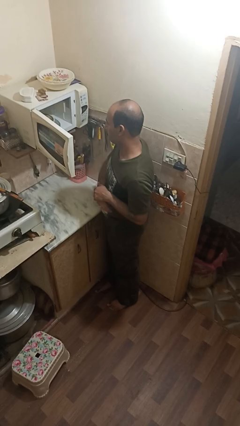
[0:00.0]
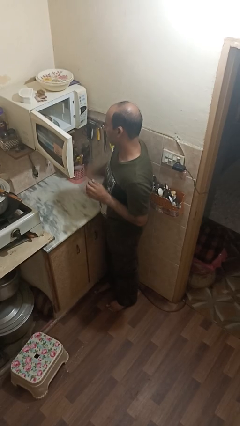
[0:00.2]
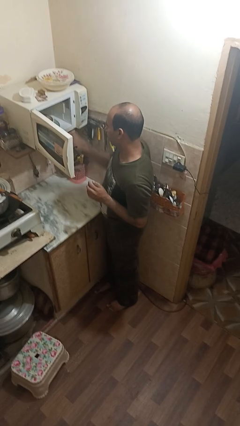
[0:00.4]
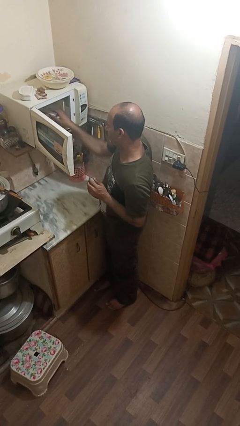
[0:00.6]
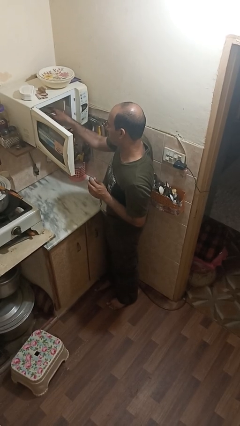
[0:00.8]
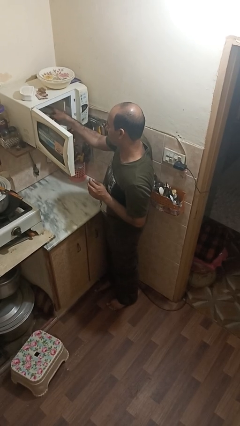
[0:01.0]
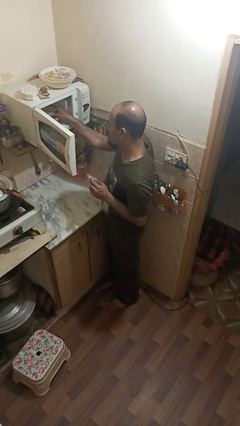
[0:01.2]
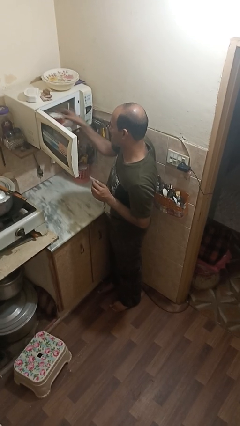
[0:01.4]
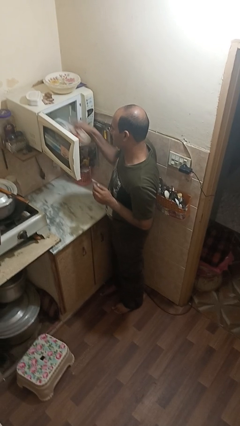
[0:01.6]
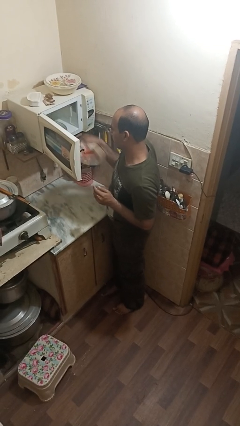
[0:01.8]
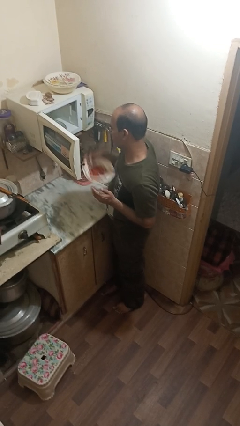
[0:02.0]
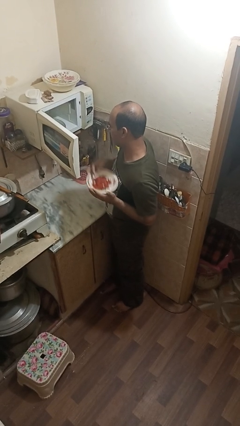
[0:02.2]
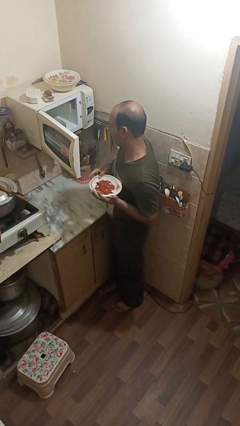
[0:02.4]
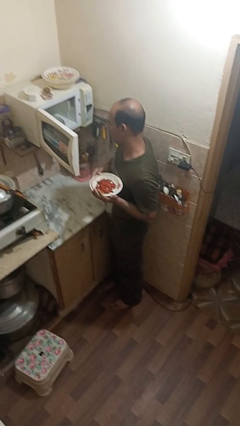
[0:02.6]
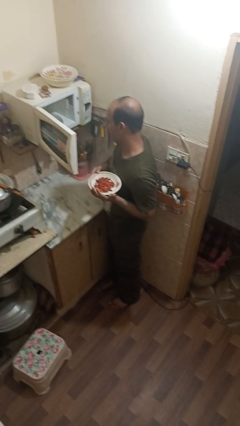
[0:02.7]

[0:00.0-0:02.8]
person takes object from microwave

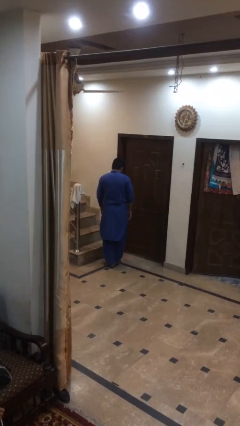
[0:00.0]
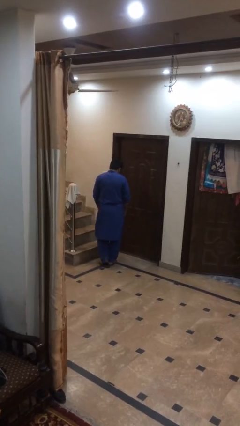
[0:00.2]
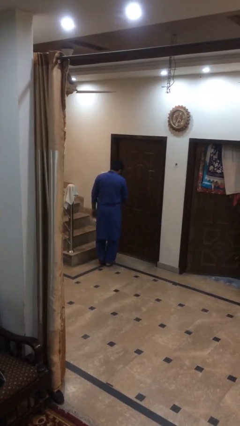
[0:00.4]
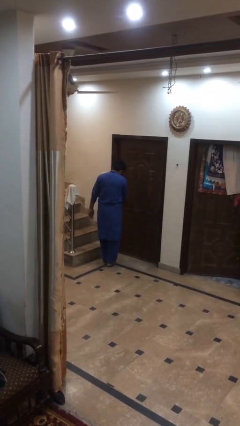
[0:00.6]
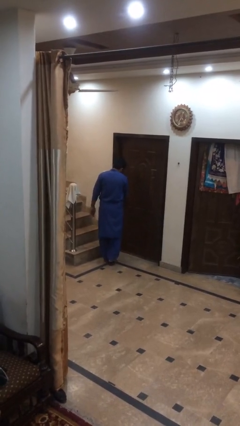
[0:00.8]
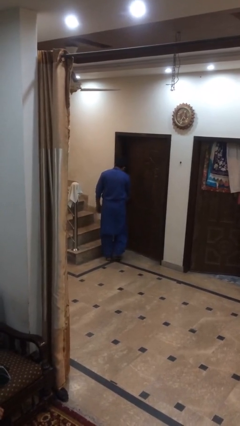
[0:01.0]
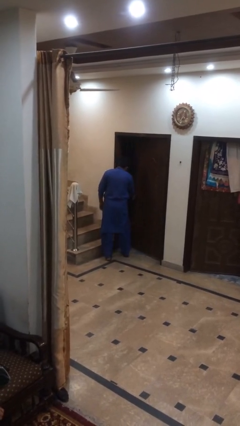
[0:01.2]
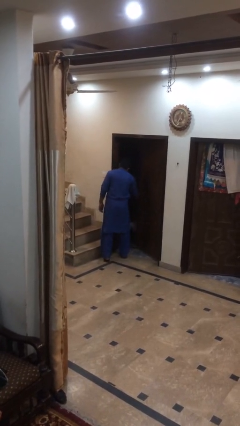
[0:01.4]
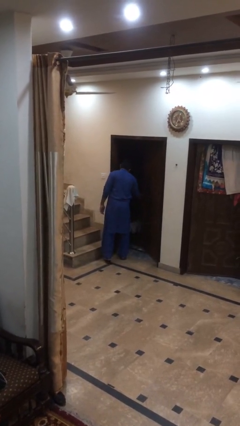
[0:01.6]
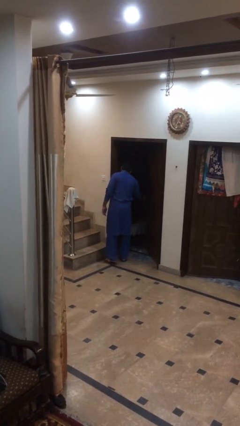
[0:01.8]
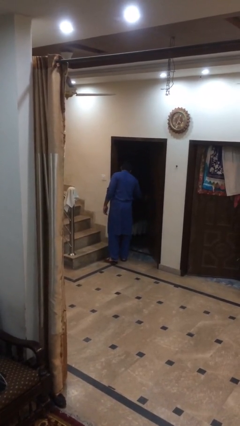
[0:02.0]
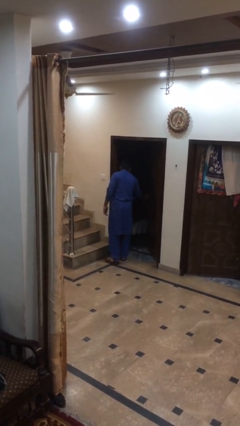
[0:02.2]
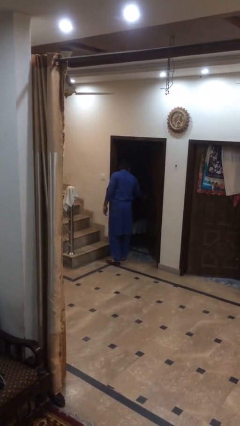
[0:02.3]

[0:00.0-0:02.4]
person opens facility door

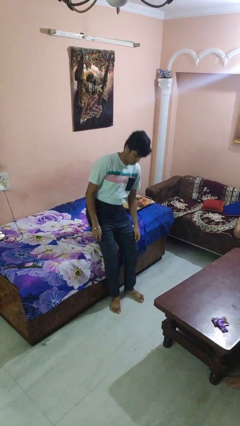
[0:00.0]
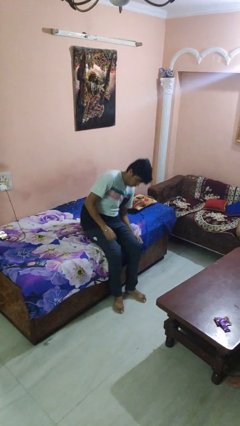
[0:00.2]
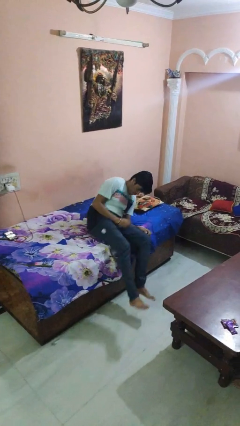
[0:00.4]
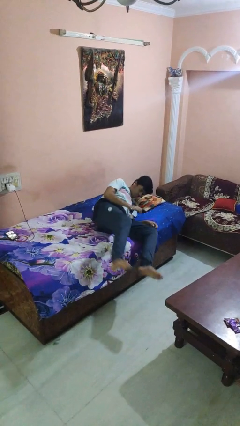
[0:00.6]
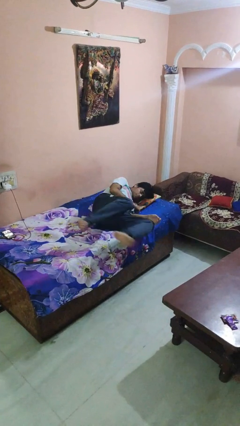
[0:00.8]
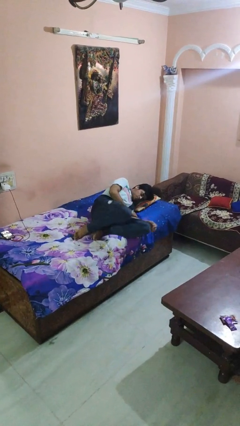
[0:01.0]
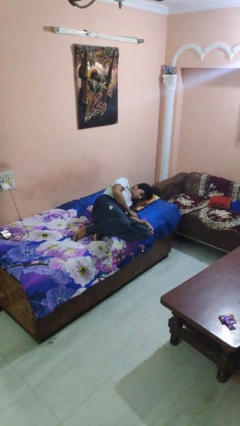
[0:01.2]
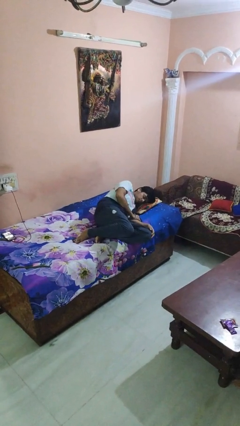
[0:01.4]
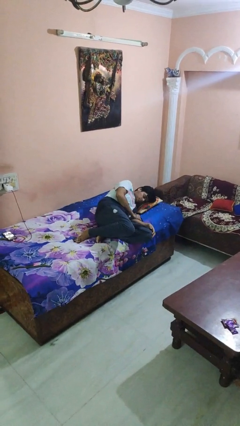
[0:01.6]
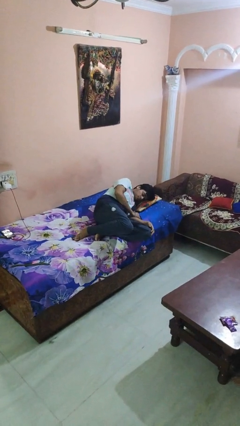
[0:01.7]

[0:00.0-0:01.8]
person lies down on bed

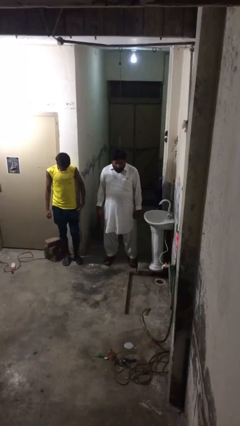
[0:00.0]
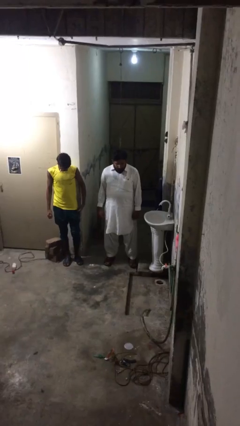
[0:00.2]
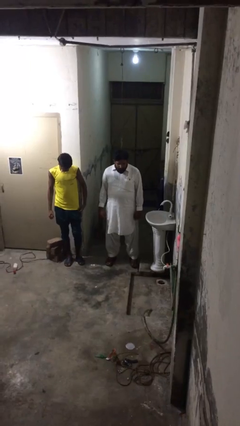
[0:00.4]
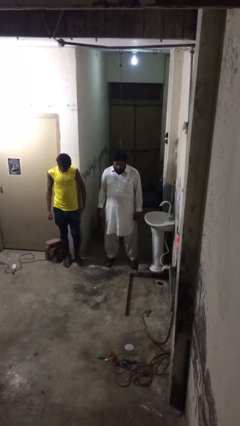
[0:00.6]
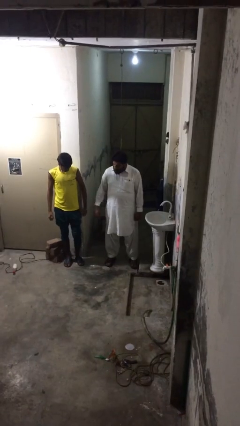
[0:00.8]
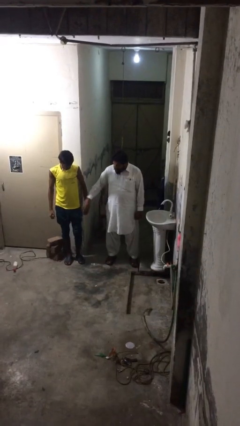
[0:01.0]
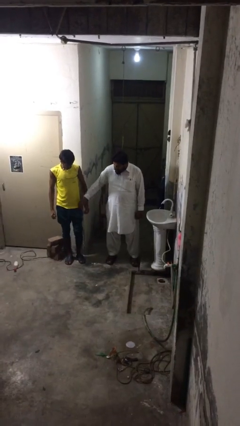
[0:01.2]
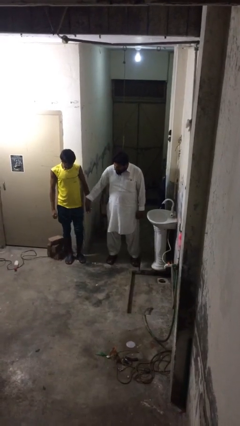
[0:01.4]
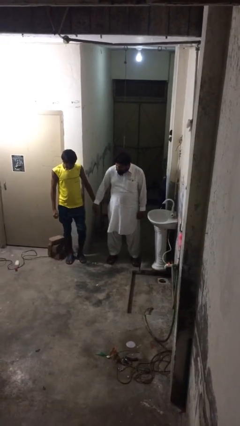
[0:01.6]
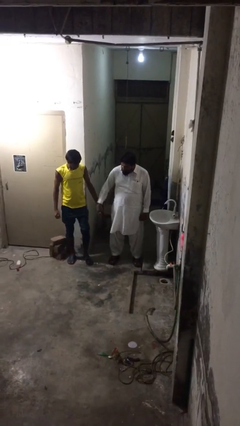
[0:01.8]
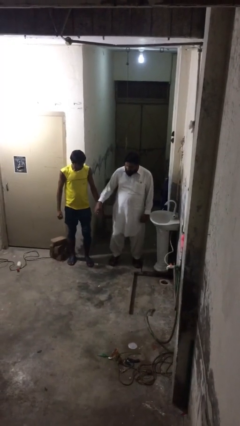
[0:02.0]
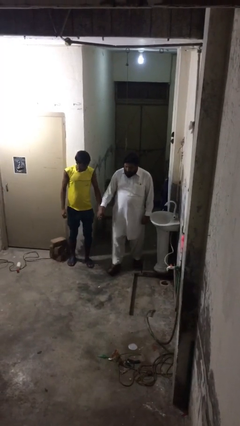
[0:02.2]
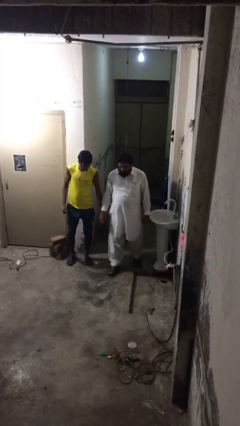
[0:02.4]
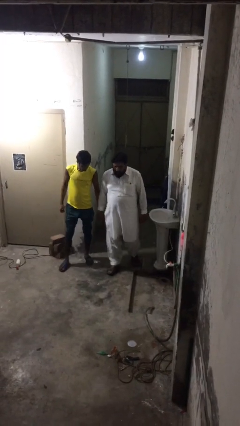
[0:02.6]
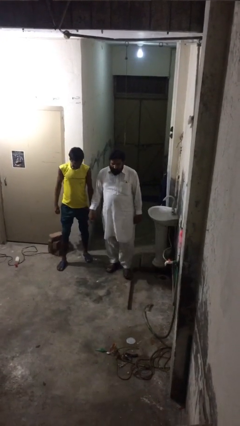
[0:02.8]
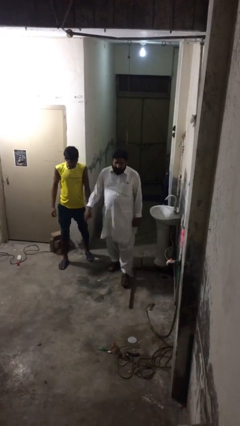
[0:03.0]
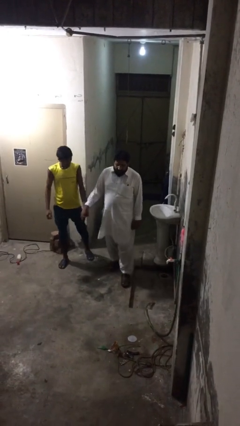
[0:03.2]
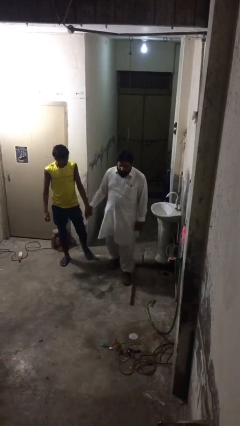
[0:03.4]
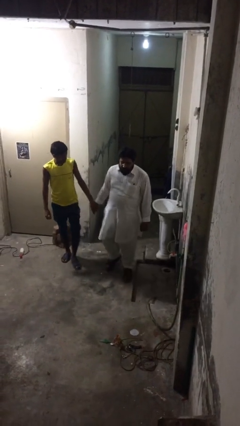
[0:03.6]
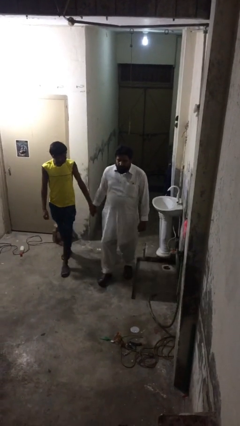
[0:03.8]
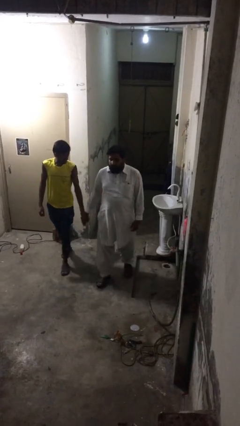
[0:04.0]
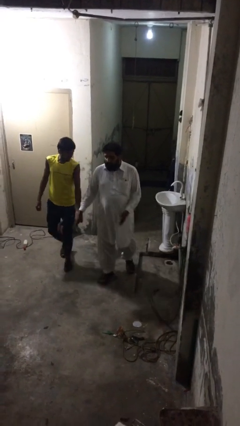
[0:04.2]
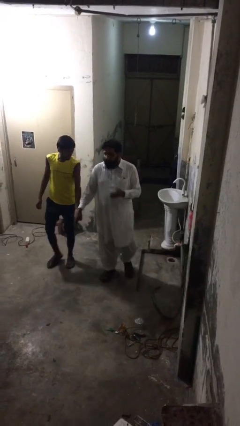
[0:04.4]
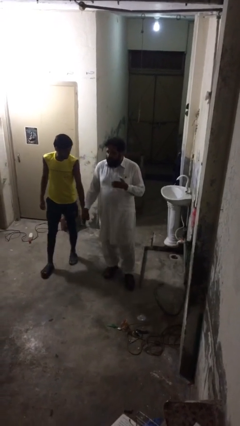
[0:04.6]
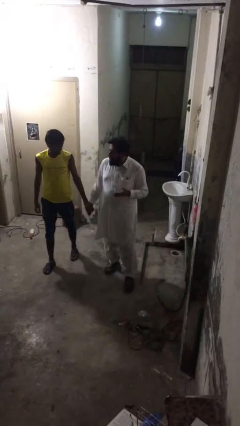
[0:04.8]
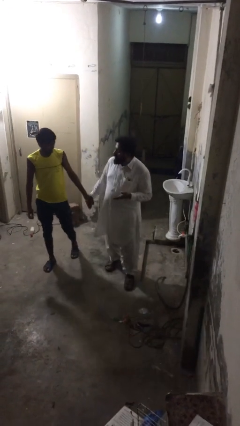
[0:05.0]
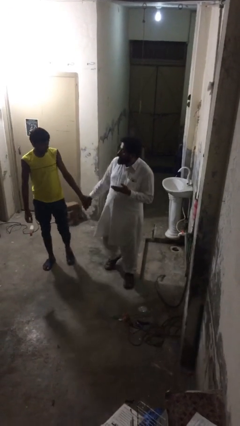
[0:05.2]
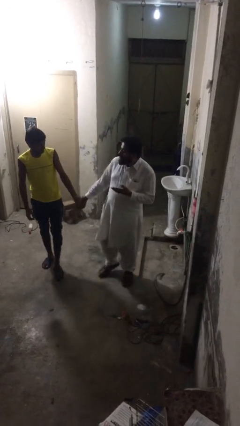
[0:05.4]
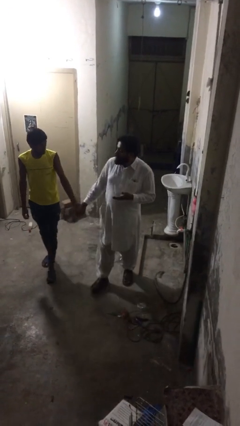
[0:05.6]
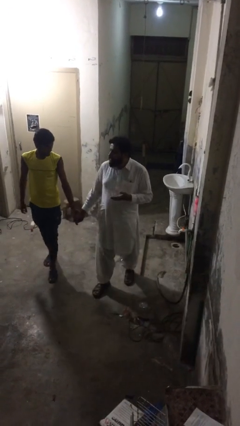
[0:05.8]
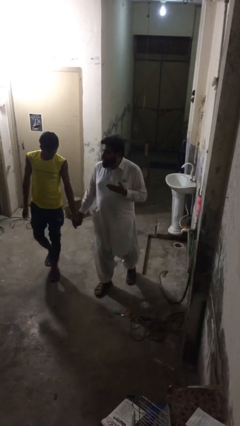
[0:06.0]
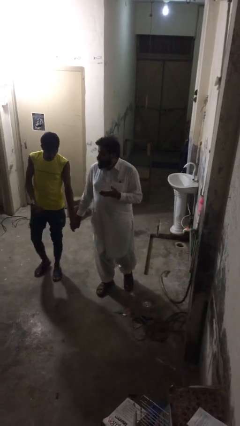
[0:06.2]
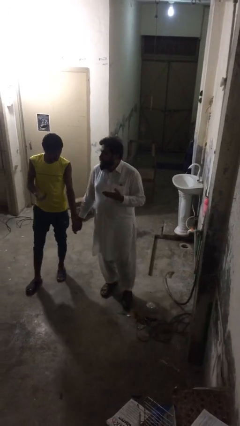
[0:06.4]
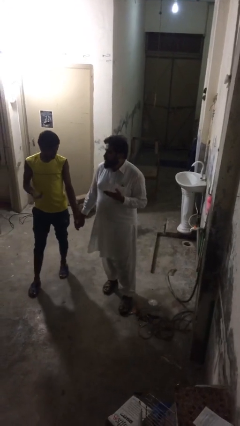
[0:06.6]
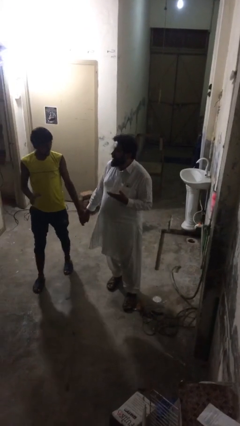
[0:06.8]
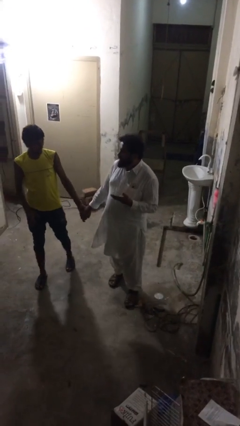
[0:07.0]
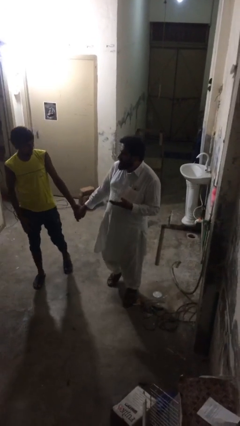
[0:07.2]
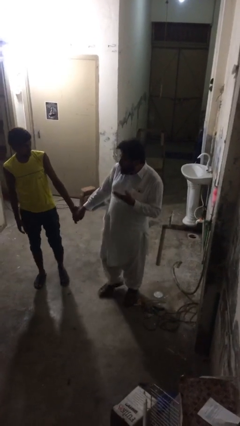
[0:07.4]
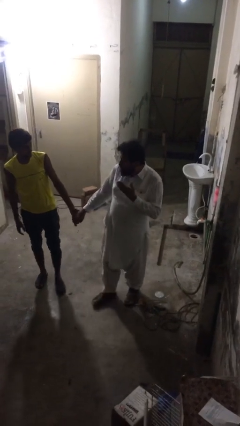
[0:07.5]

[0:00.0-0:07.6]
person holds hand

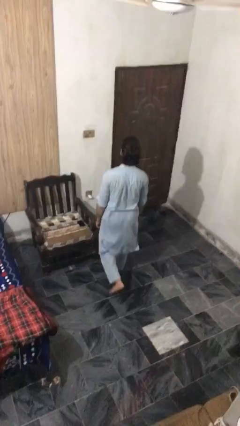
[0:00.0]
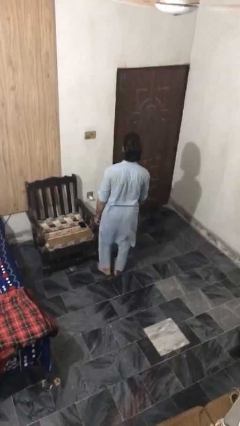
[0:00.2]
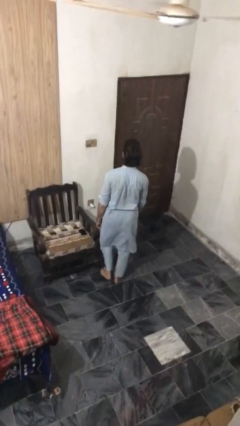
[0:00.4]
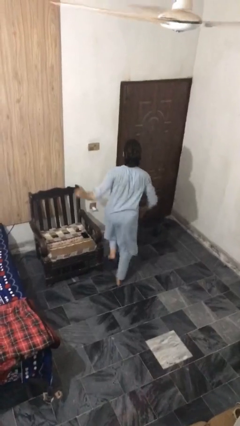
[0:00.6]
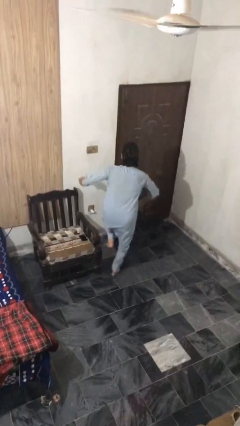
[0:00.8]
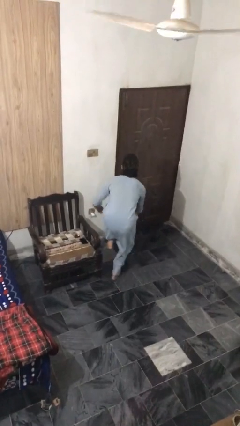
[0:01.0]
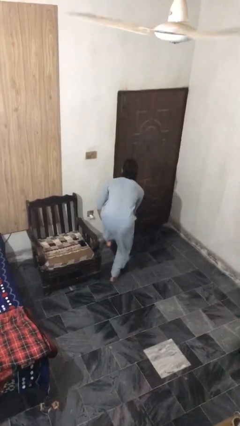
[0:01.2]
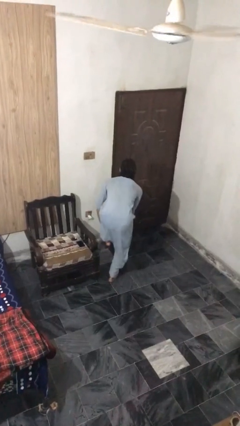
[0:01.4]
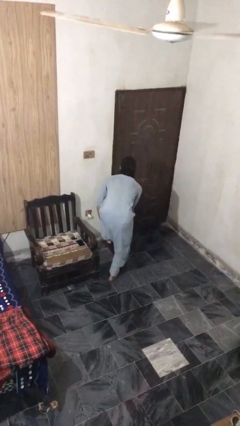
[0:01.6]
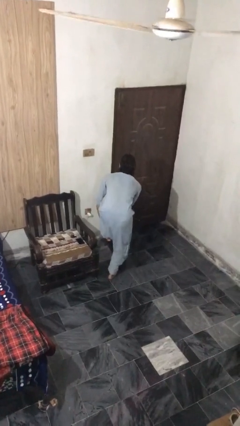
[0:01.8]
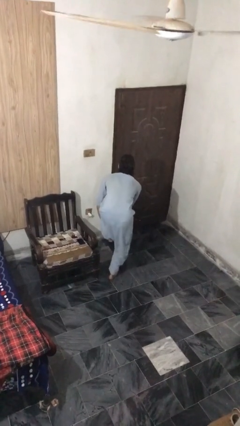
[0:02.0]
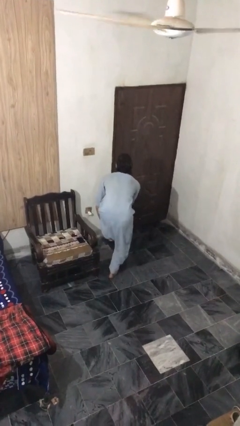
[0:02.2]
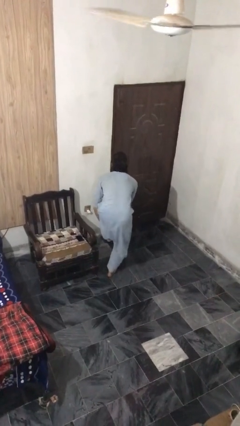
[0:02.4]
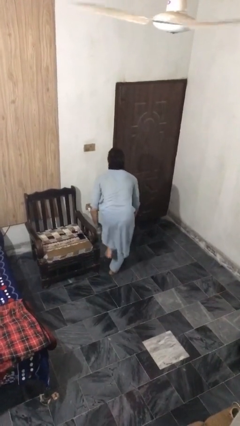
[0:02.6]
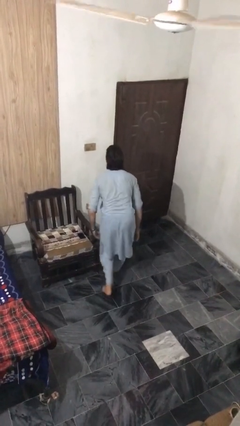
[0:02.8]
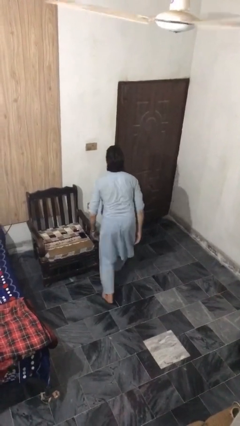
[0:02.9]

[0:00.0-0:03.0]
person stubs toe
